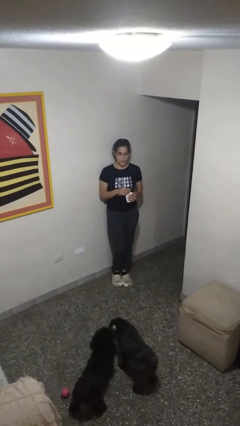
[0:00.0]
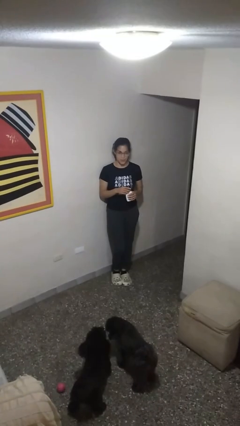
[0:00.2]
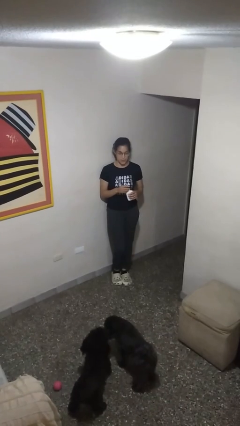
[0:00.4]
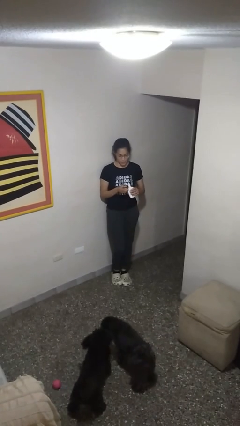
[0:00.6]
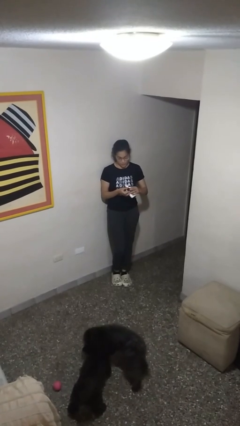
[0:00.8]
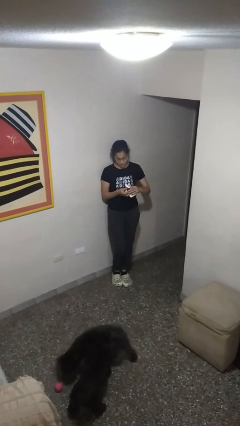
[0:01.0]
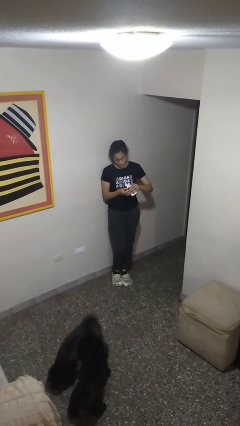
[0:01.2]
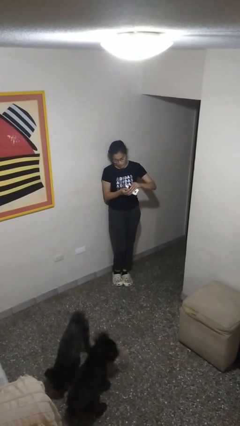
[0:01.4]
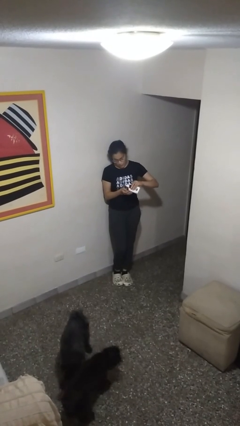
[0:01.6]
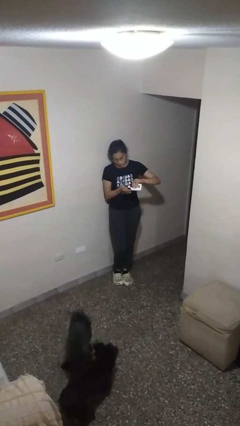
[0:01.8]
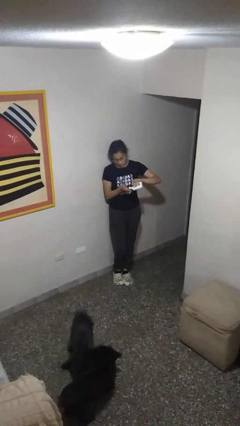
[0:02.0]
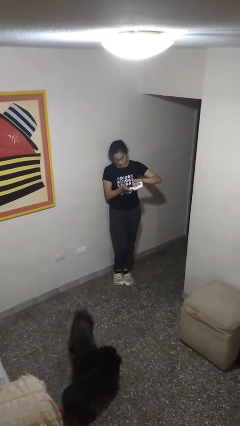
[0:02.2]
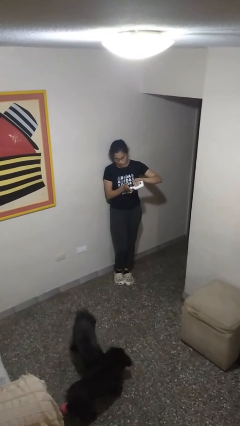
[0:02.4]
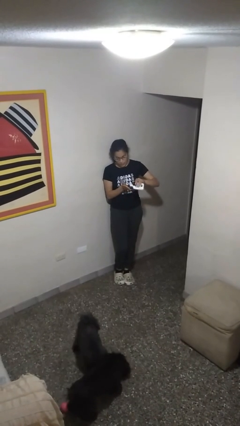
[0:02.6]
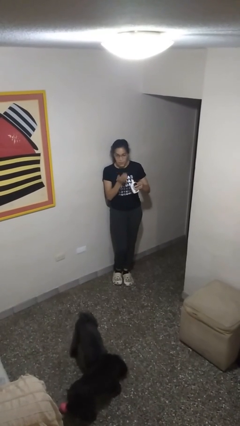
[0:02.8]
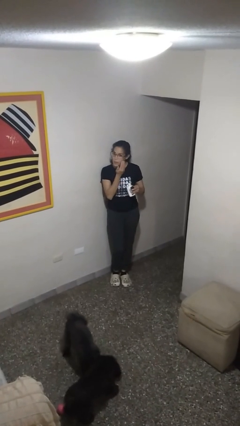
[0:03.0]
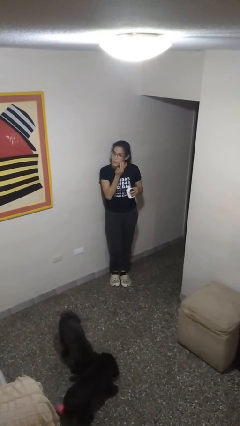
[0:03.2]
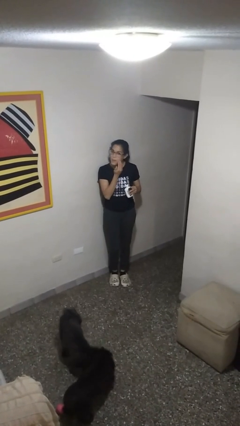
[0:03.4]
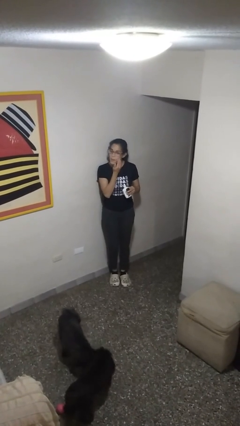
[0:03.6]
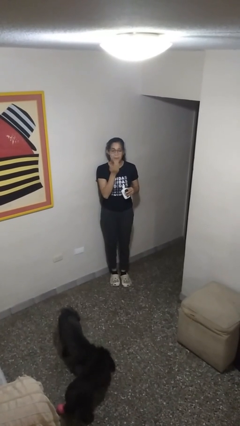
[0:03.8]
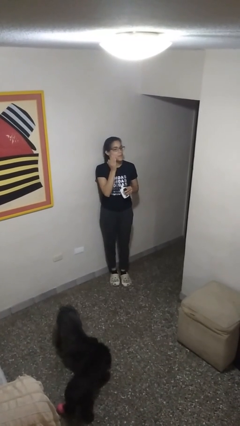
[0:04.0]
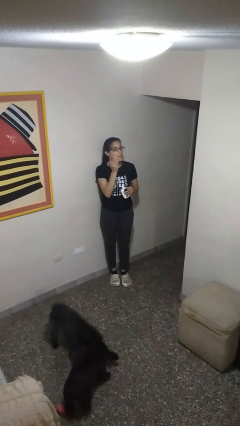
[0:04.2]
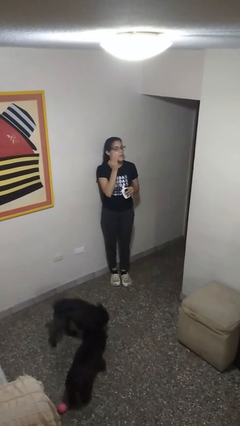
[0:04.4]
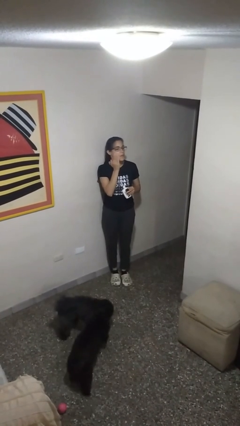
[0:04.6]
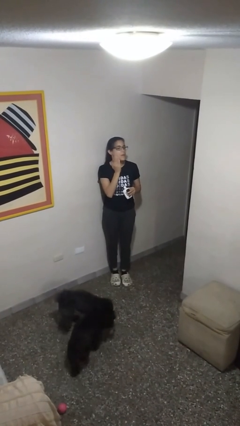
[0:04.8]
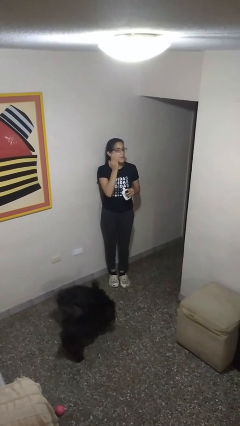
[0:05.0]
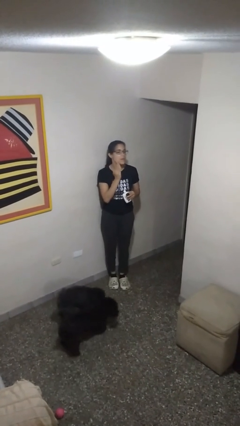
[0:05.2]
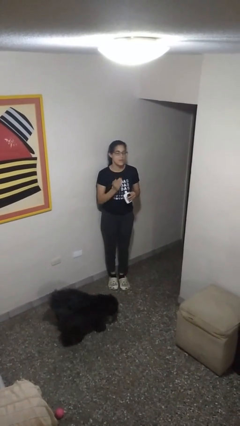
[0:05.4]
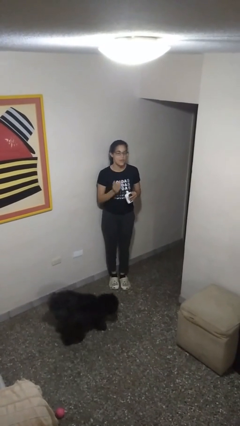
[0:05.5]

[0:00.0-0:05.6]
person applies sunscreen

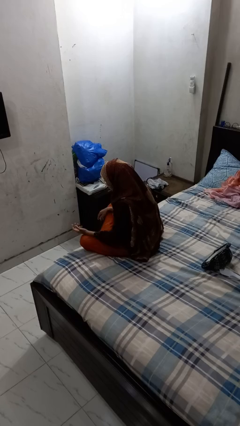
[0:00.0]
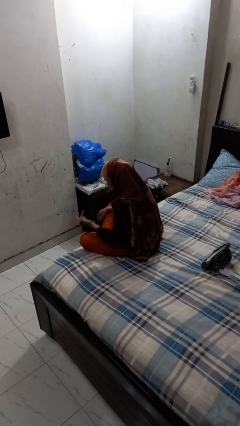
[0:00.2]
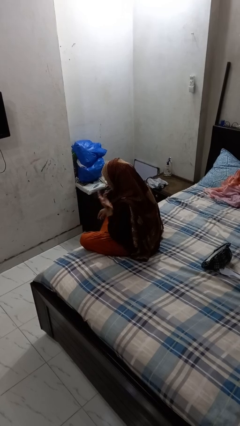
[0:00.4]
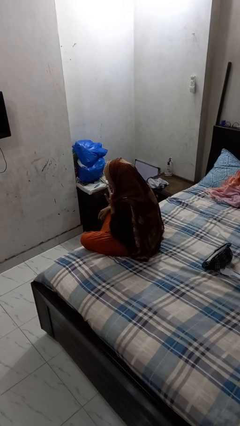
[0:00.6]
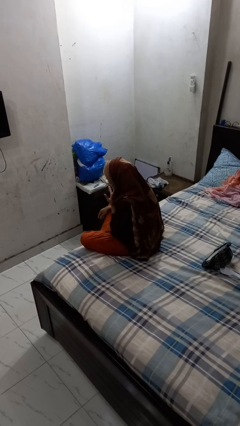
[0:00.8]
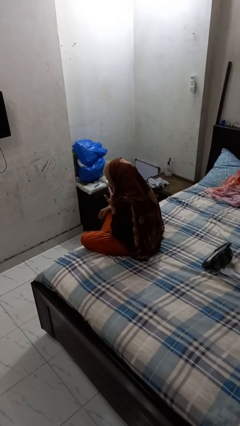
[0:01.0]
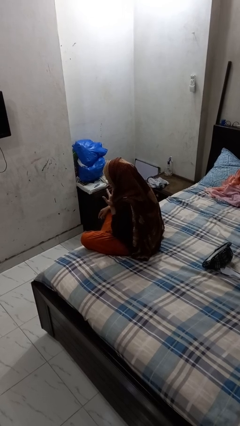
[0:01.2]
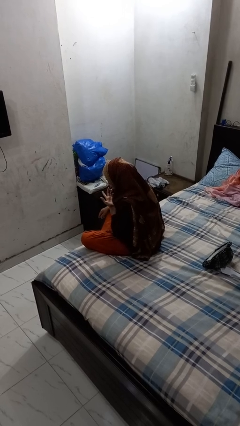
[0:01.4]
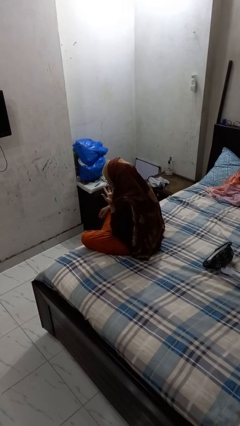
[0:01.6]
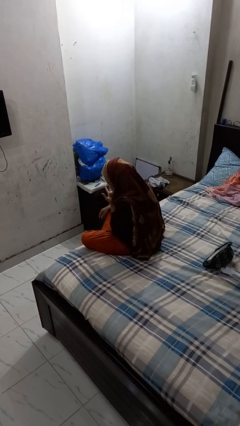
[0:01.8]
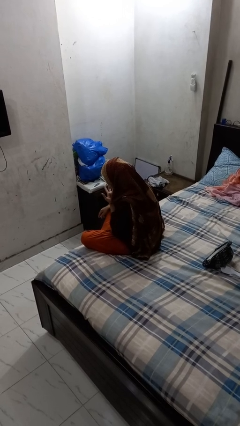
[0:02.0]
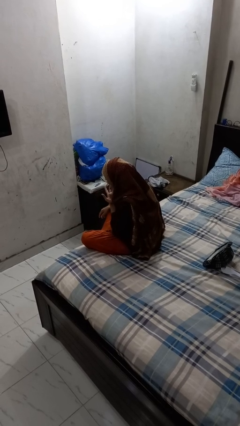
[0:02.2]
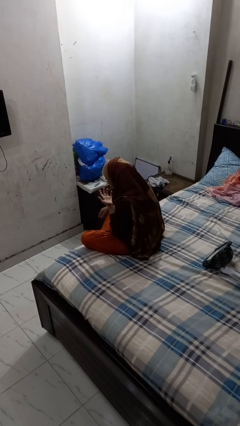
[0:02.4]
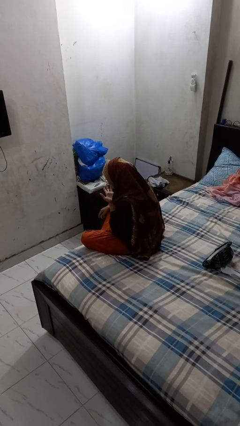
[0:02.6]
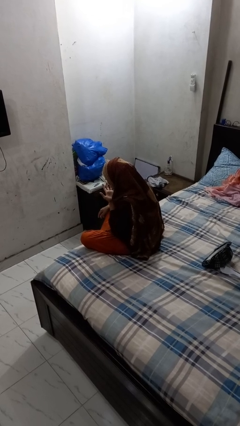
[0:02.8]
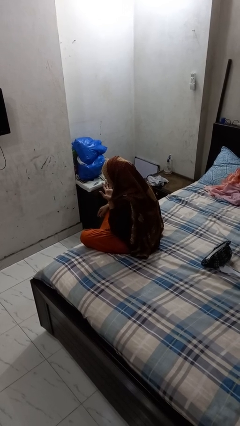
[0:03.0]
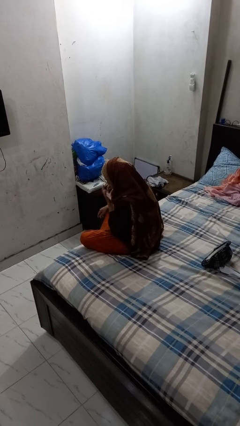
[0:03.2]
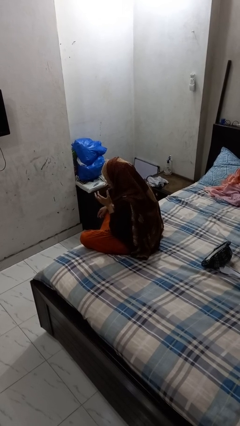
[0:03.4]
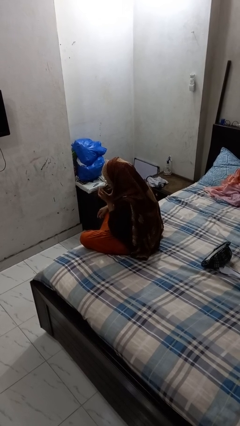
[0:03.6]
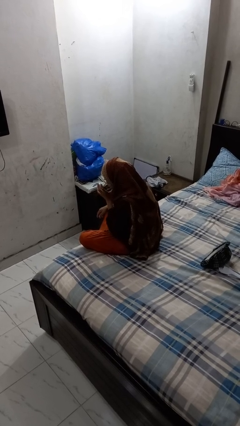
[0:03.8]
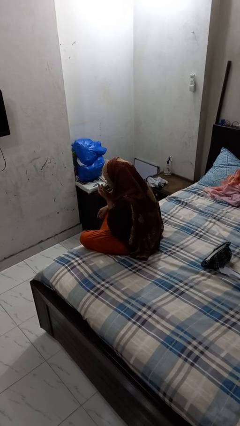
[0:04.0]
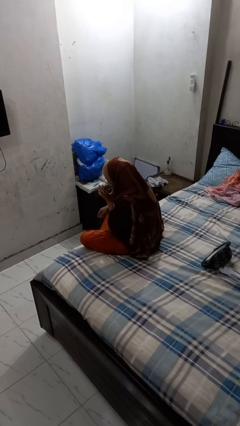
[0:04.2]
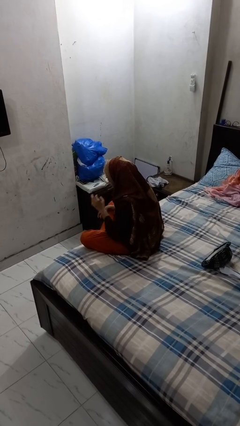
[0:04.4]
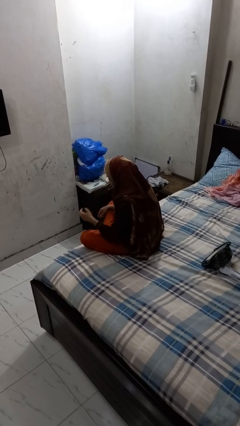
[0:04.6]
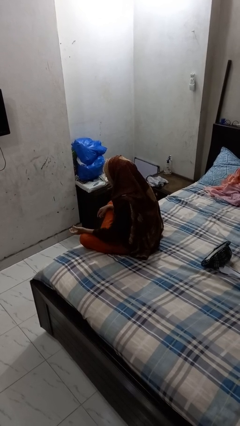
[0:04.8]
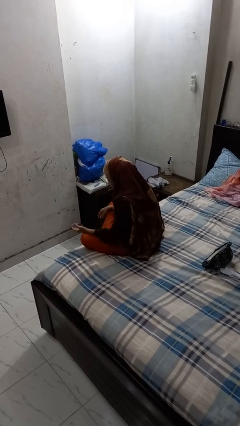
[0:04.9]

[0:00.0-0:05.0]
person licks fingers

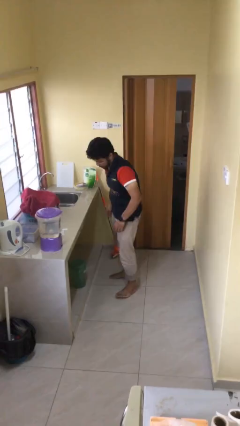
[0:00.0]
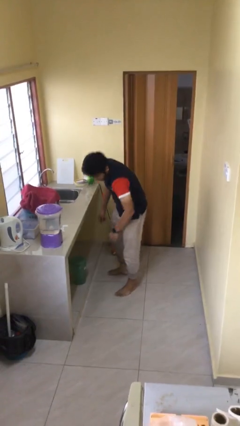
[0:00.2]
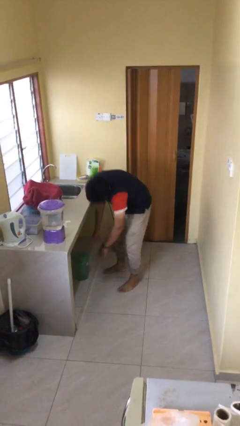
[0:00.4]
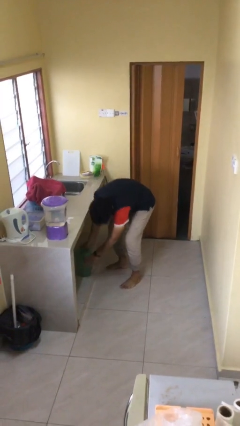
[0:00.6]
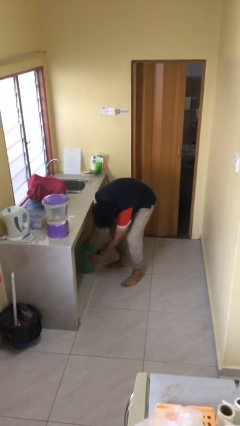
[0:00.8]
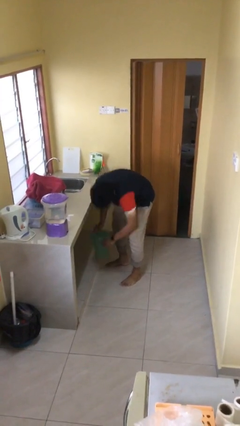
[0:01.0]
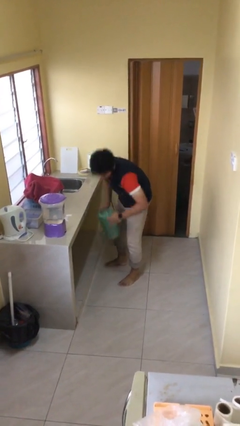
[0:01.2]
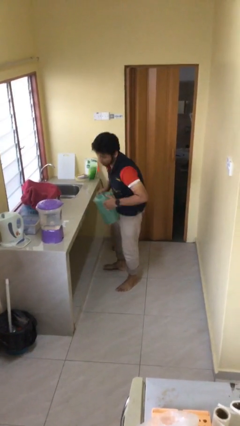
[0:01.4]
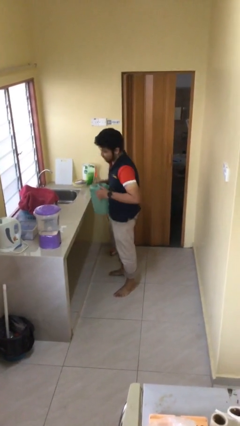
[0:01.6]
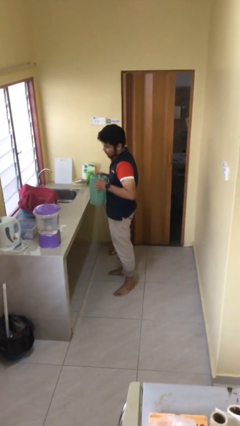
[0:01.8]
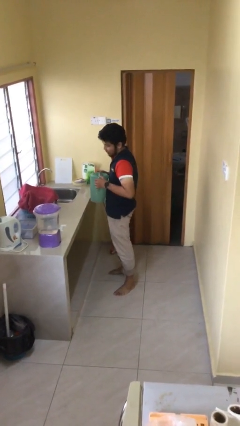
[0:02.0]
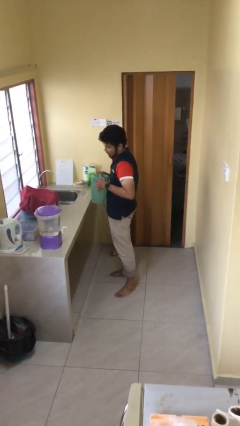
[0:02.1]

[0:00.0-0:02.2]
person picks up object from cabinet

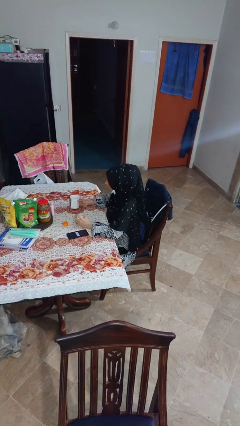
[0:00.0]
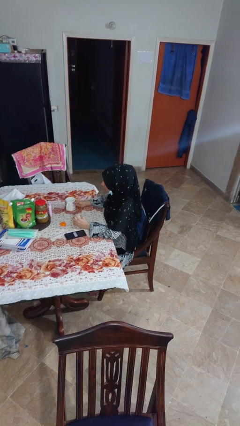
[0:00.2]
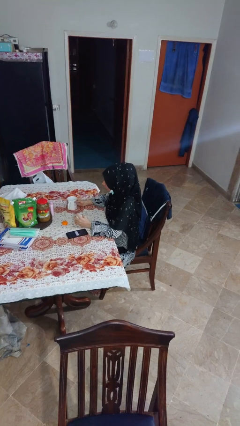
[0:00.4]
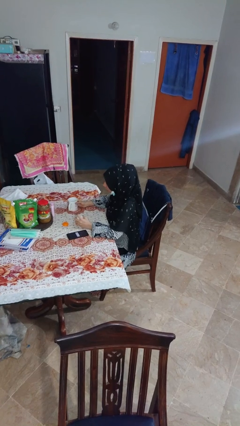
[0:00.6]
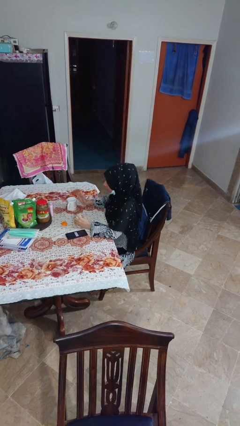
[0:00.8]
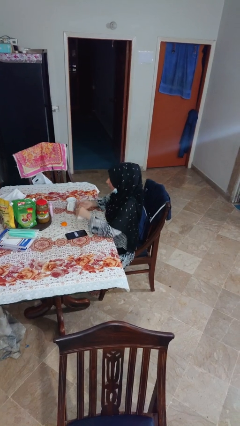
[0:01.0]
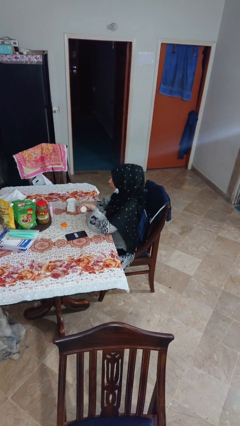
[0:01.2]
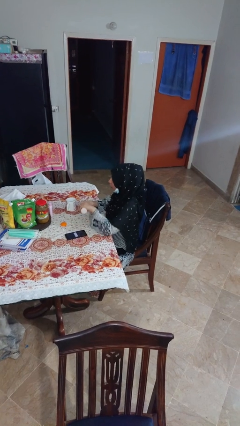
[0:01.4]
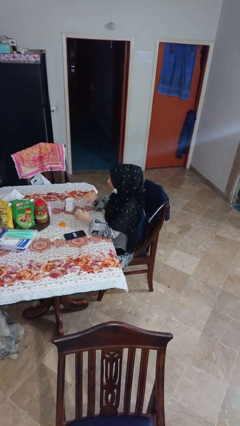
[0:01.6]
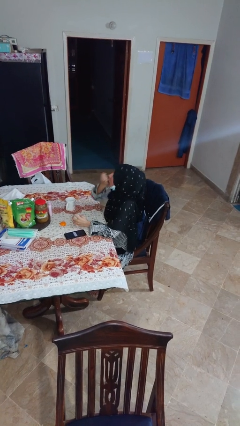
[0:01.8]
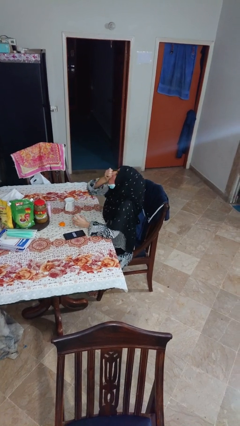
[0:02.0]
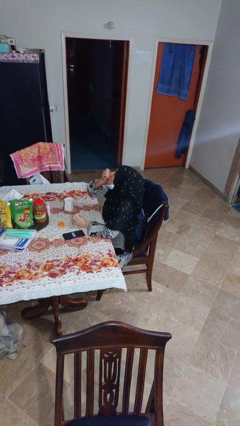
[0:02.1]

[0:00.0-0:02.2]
person takes medicine pills

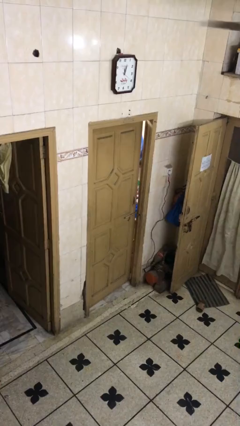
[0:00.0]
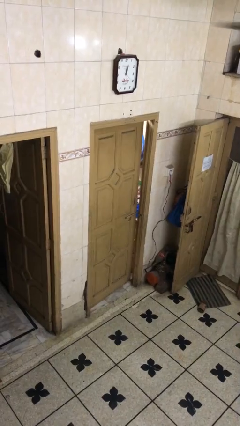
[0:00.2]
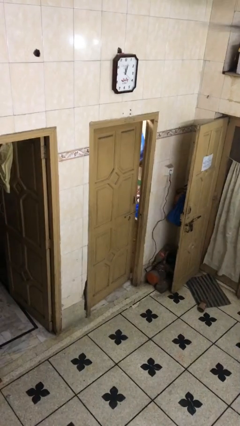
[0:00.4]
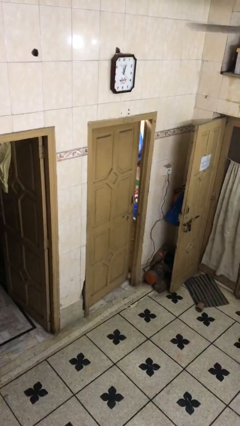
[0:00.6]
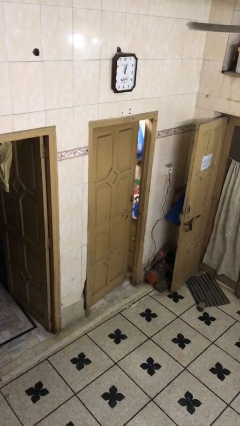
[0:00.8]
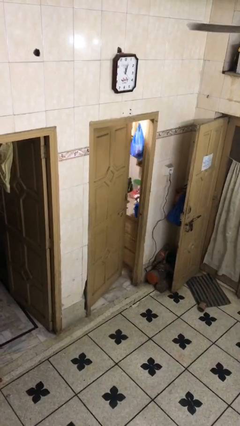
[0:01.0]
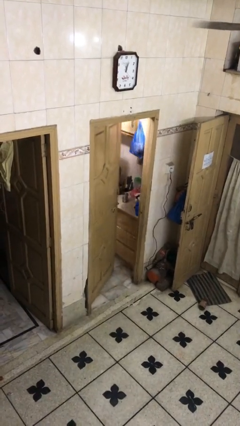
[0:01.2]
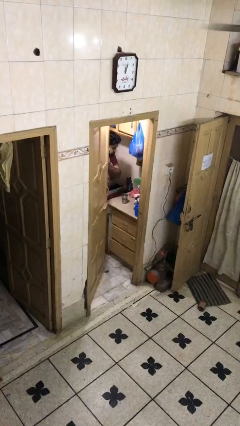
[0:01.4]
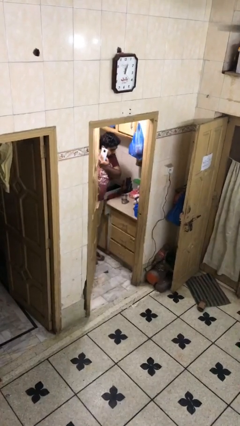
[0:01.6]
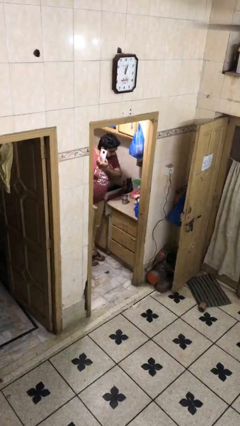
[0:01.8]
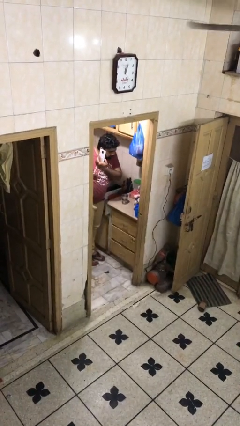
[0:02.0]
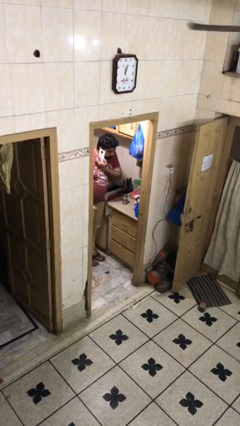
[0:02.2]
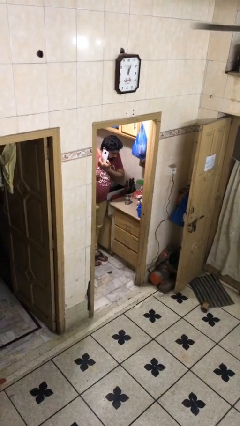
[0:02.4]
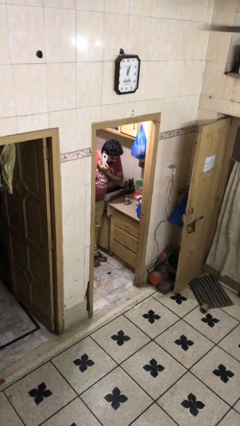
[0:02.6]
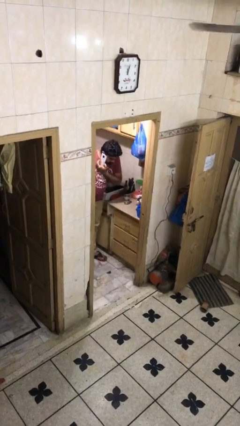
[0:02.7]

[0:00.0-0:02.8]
person opens facility door
